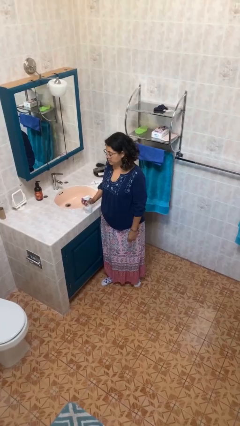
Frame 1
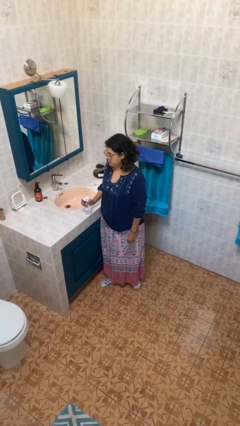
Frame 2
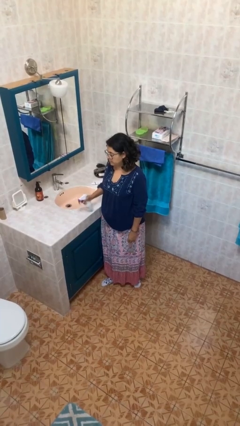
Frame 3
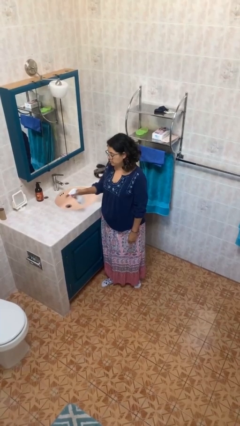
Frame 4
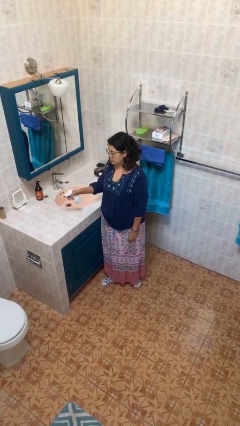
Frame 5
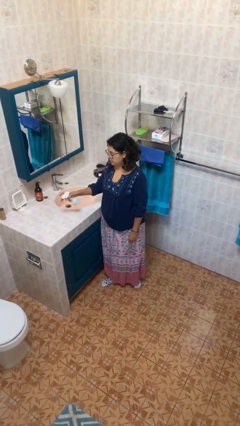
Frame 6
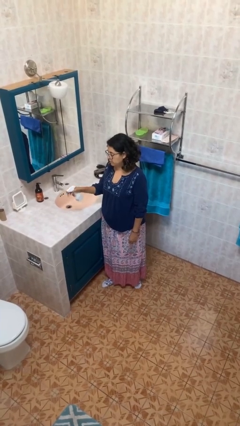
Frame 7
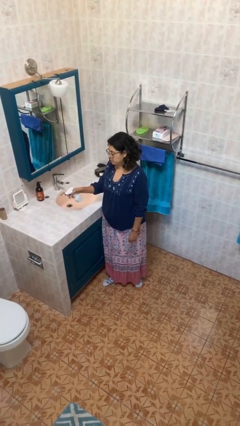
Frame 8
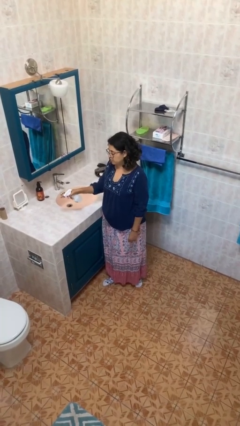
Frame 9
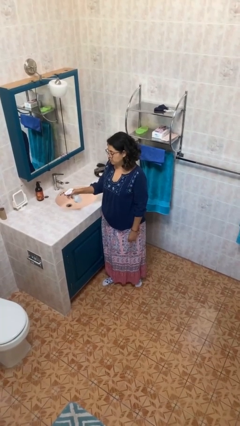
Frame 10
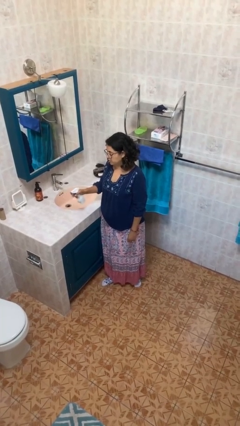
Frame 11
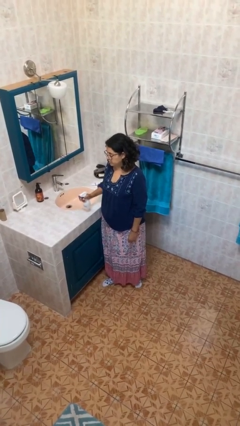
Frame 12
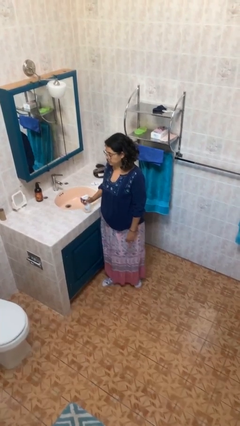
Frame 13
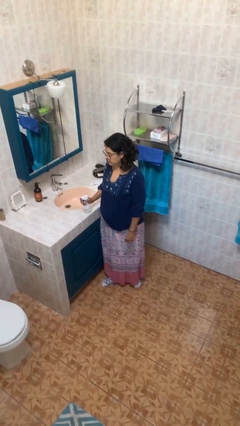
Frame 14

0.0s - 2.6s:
person sprays from bottle

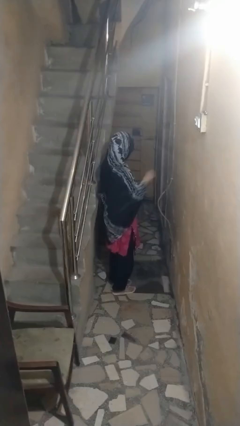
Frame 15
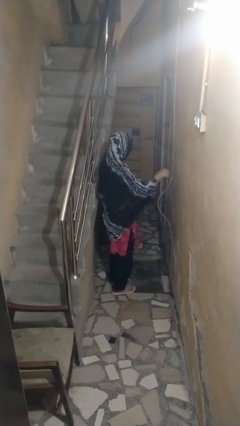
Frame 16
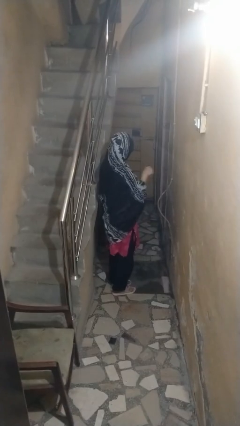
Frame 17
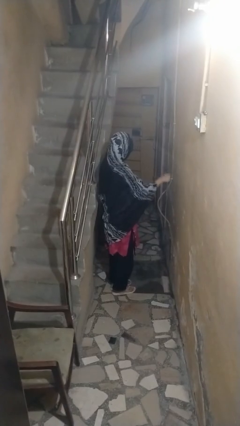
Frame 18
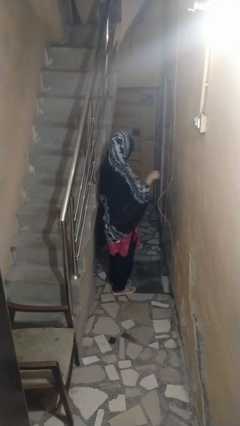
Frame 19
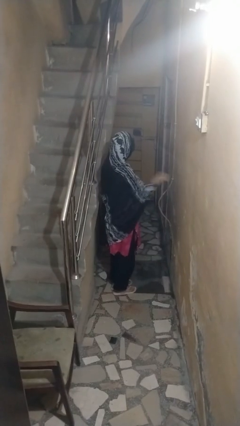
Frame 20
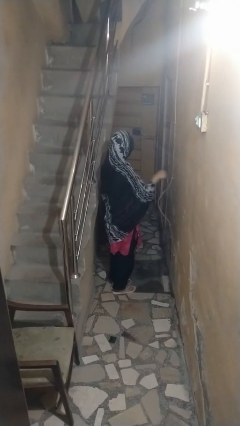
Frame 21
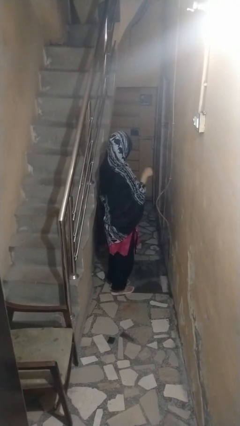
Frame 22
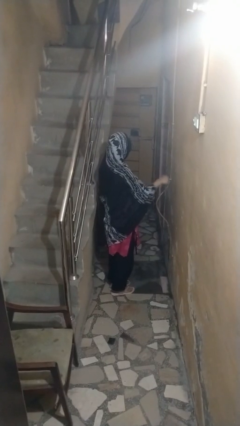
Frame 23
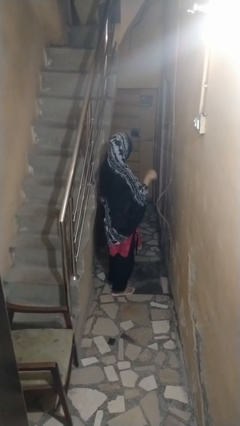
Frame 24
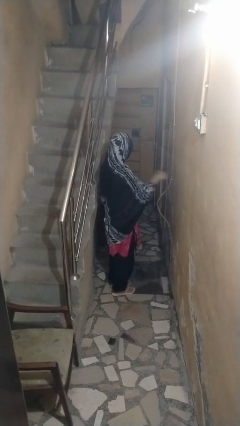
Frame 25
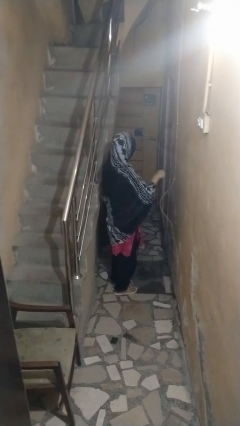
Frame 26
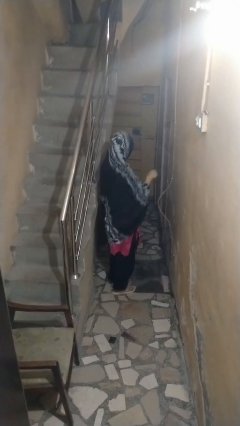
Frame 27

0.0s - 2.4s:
person punches

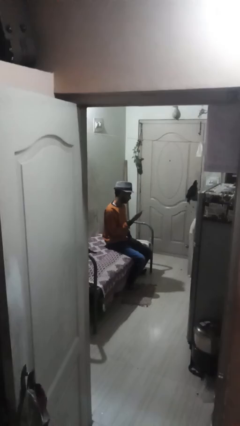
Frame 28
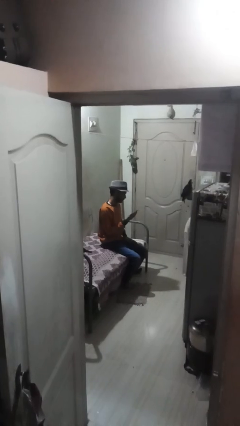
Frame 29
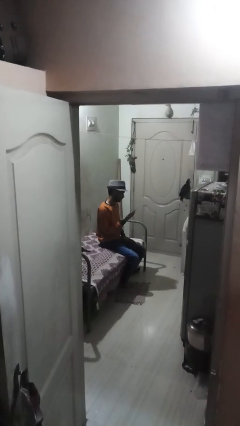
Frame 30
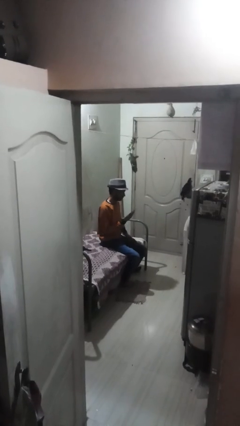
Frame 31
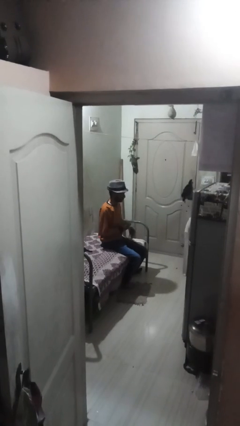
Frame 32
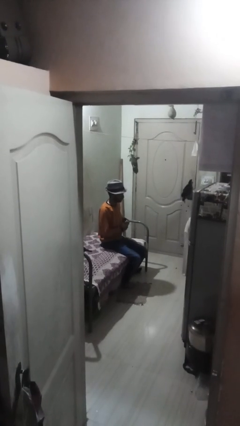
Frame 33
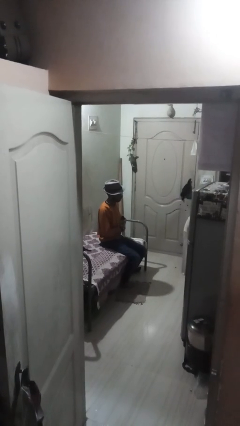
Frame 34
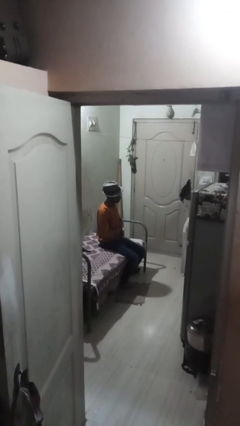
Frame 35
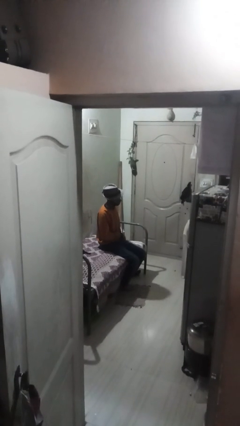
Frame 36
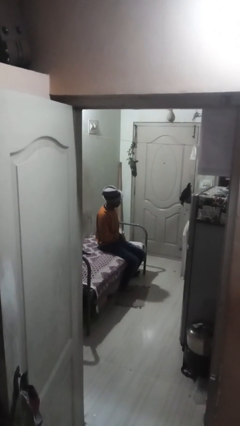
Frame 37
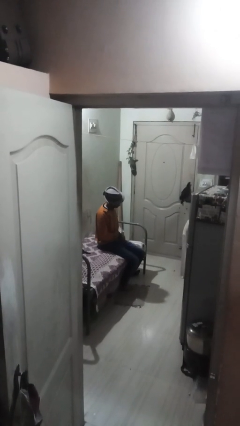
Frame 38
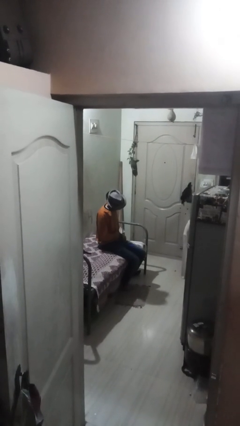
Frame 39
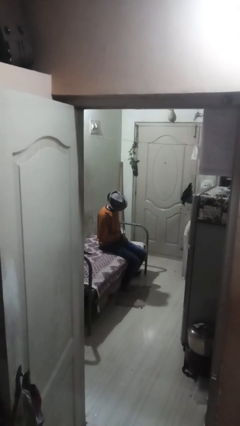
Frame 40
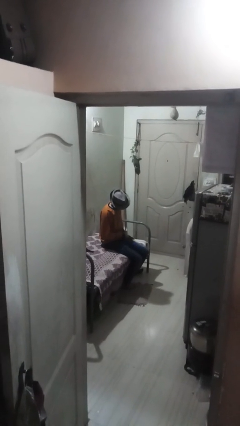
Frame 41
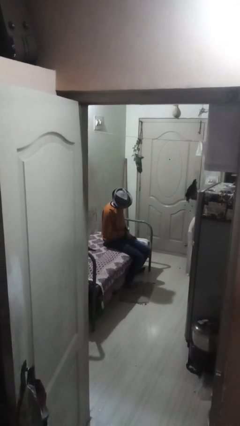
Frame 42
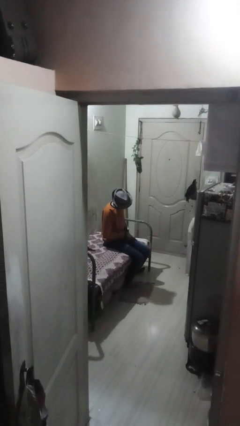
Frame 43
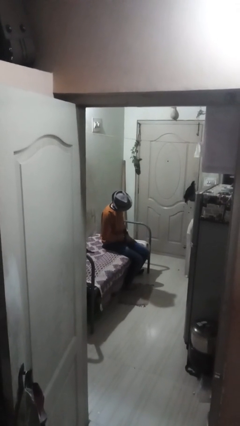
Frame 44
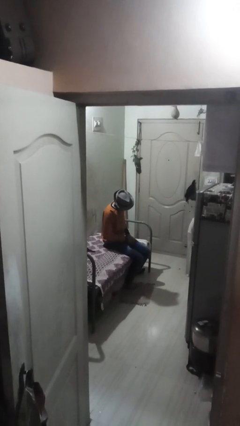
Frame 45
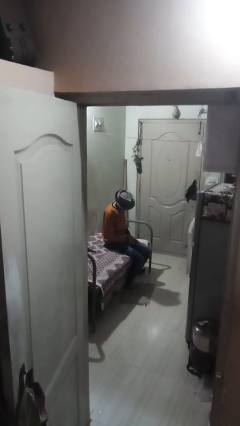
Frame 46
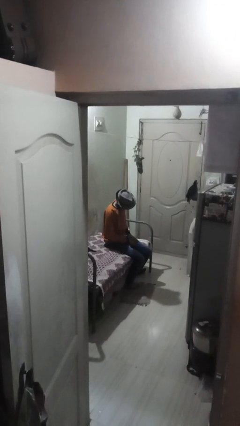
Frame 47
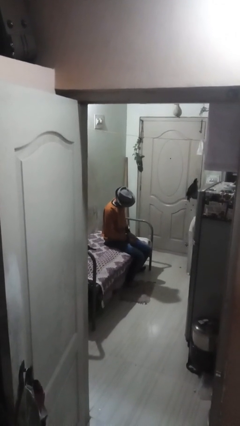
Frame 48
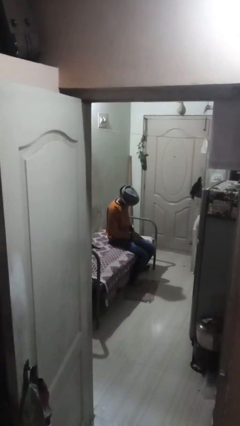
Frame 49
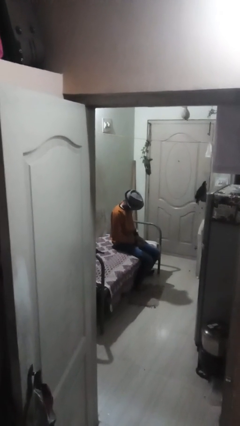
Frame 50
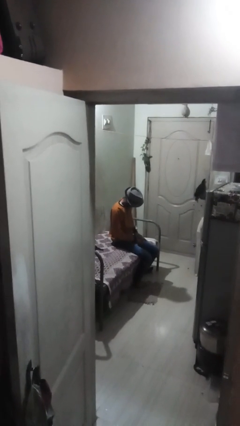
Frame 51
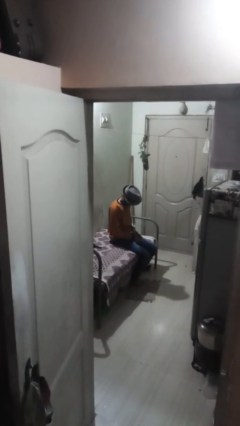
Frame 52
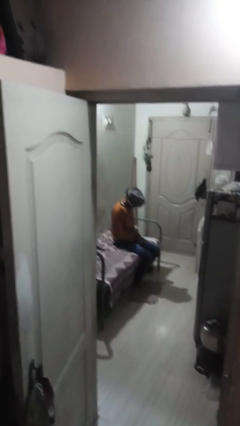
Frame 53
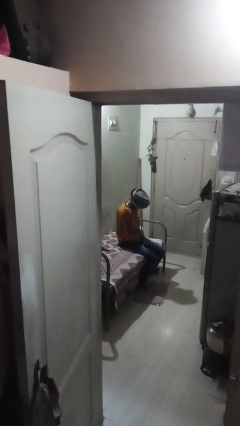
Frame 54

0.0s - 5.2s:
person puts phone into pocket

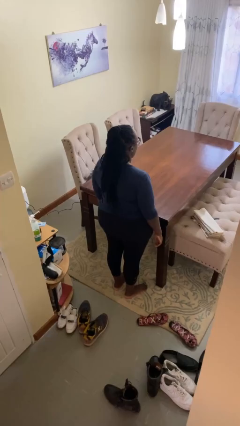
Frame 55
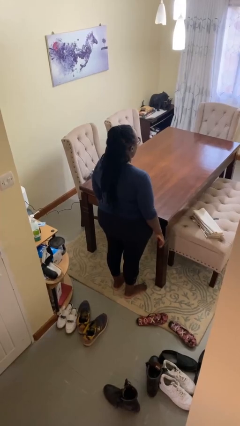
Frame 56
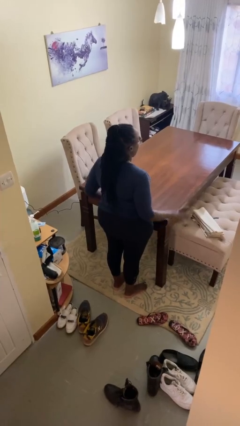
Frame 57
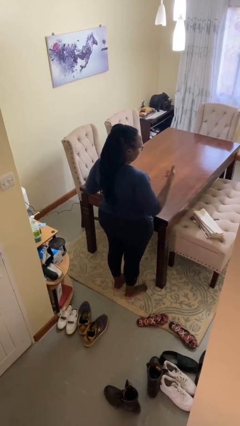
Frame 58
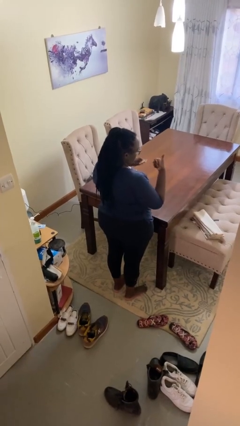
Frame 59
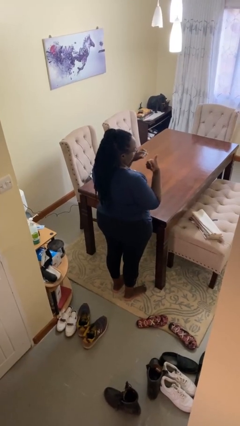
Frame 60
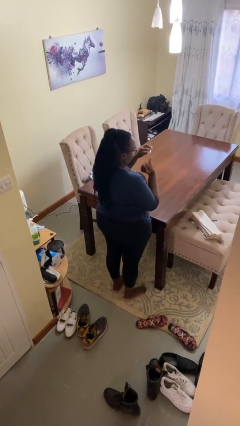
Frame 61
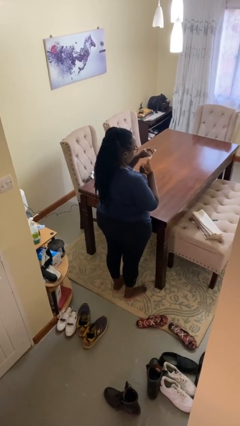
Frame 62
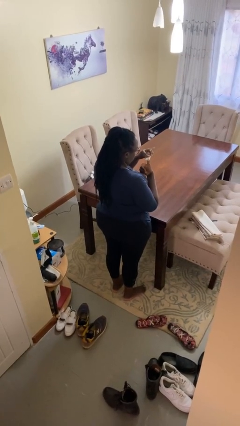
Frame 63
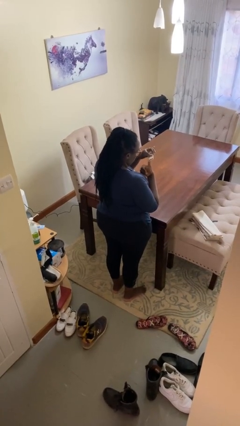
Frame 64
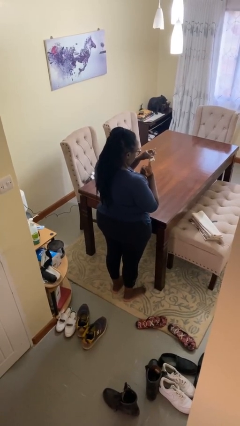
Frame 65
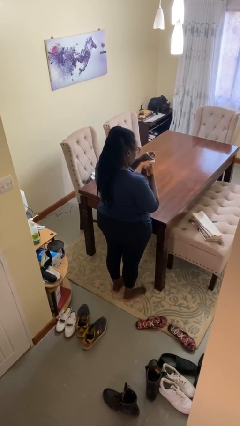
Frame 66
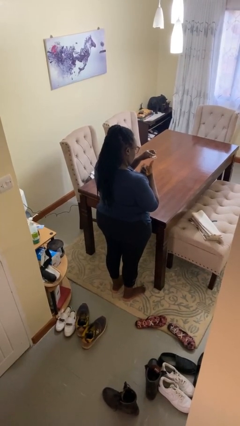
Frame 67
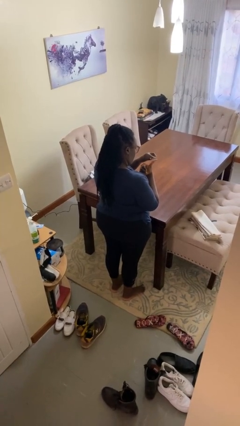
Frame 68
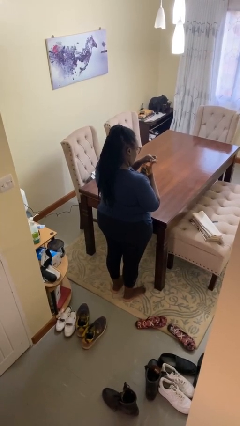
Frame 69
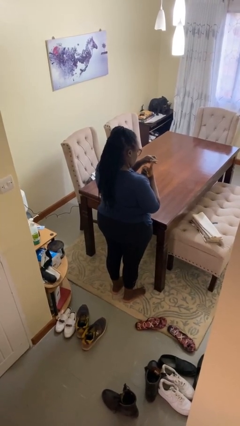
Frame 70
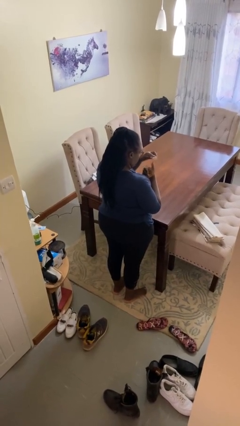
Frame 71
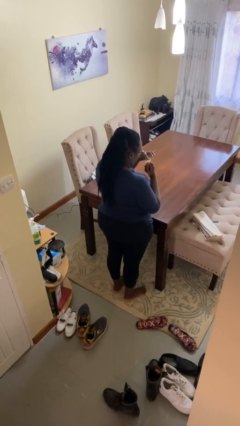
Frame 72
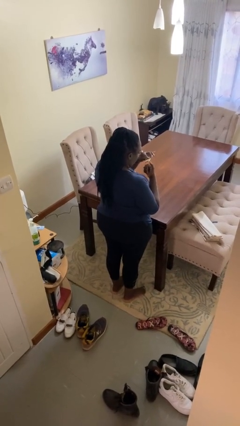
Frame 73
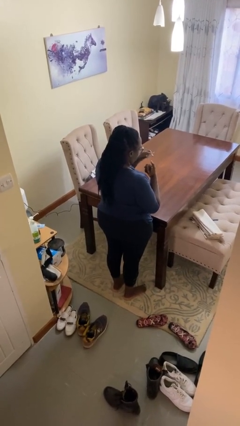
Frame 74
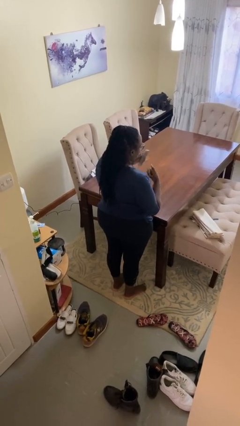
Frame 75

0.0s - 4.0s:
person files fingernails

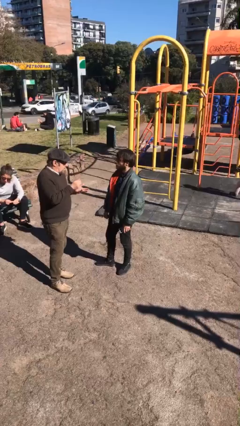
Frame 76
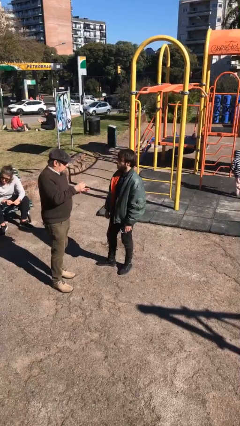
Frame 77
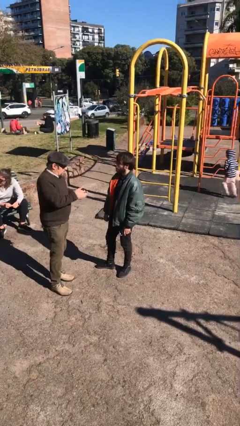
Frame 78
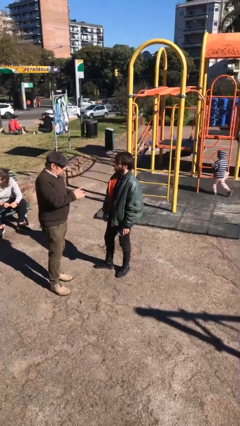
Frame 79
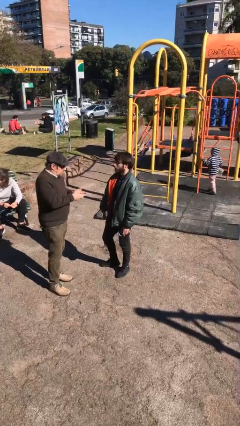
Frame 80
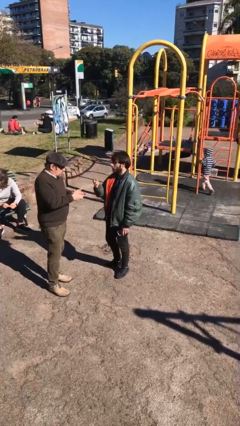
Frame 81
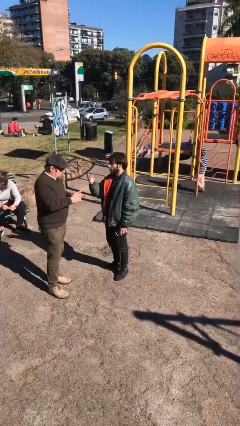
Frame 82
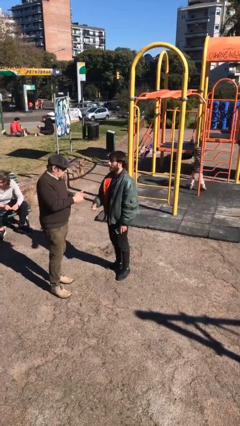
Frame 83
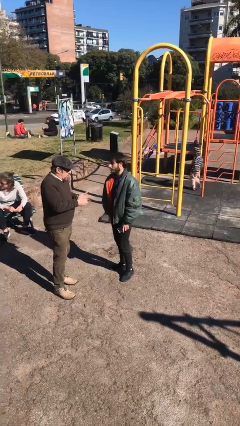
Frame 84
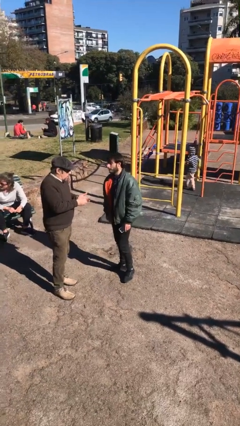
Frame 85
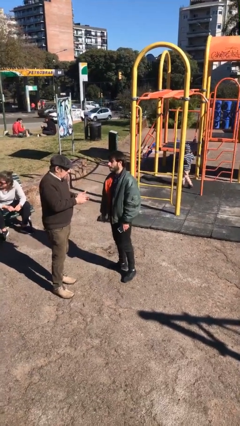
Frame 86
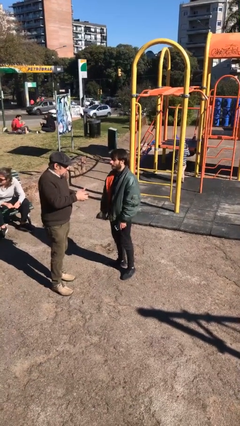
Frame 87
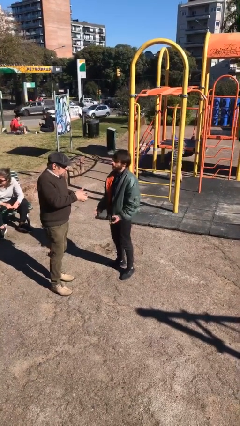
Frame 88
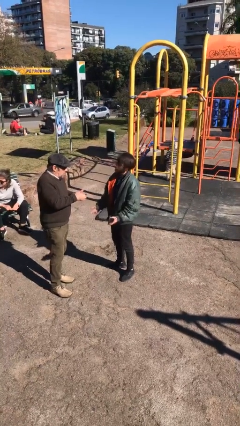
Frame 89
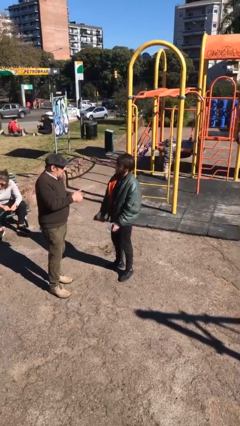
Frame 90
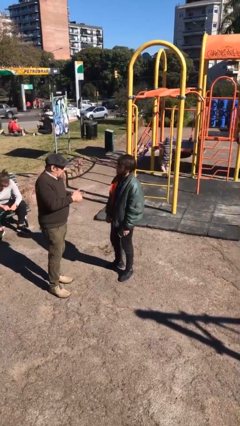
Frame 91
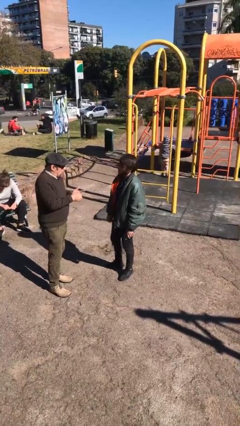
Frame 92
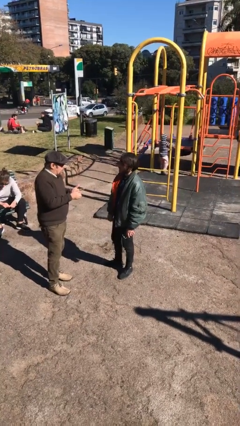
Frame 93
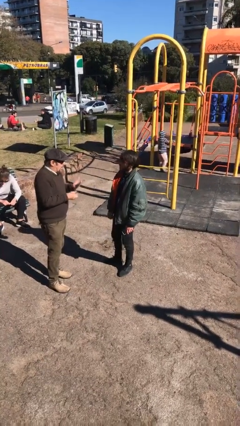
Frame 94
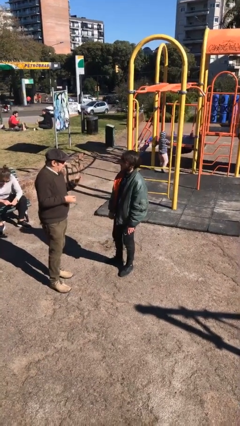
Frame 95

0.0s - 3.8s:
person talks to person
